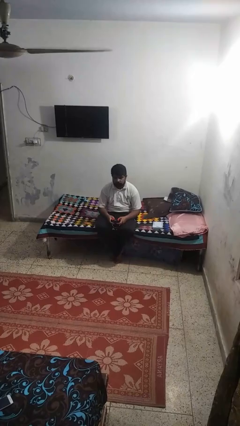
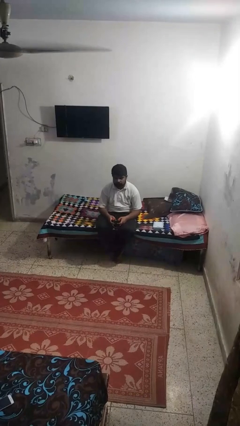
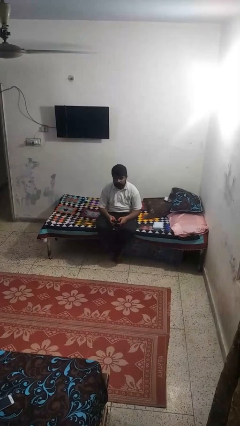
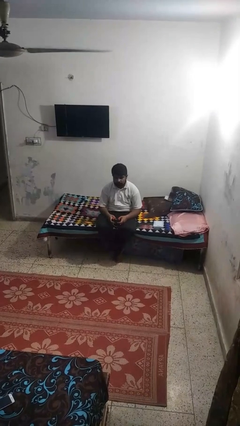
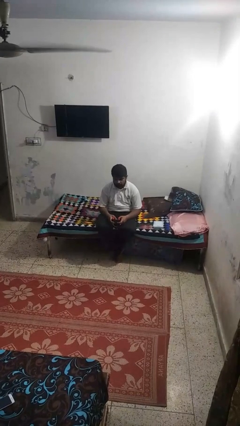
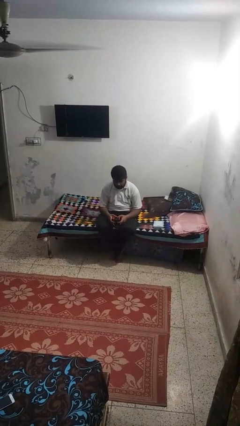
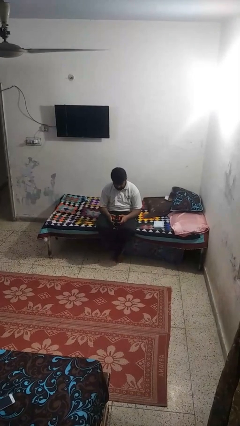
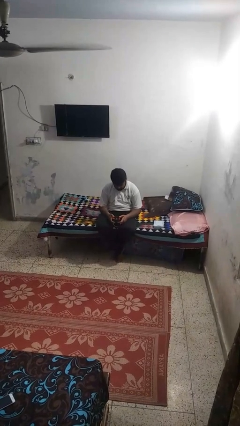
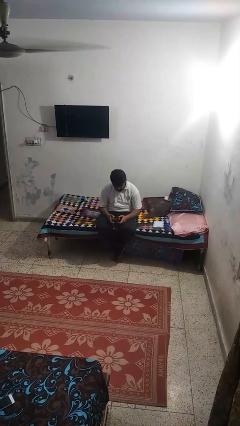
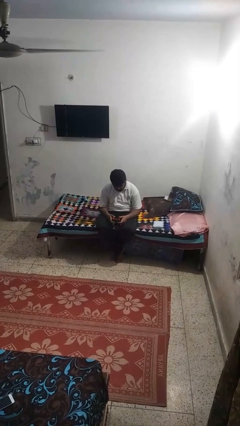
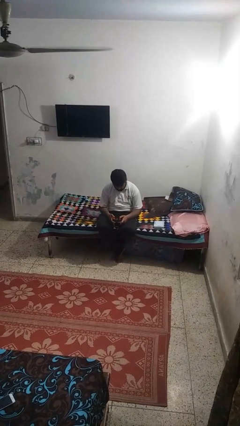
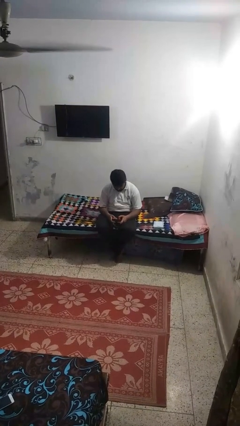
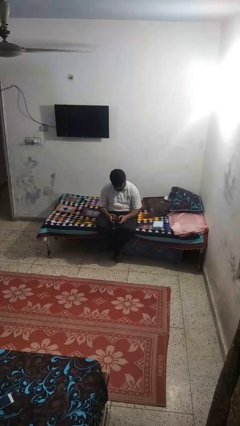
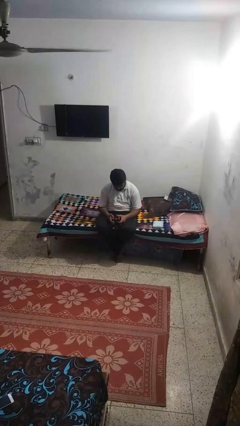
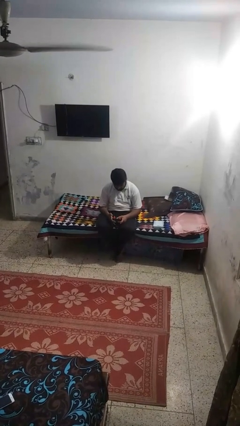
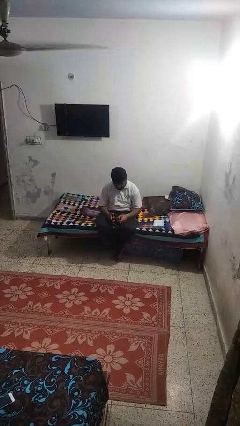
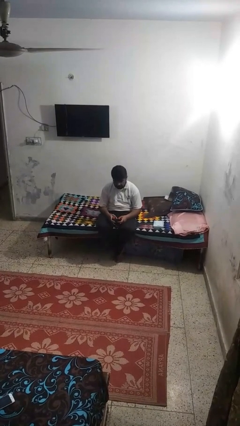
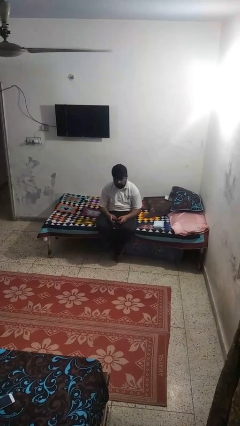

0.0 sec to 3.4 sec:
person interacts with handheld game

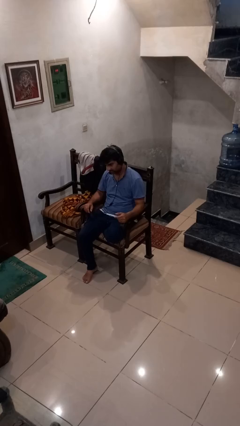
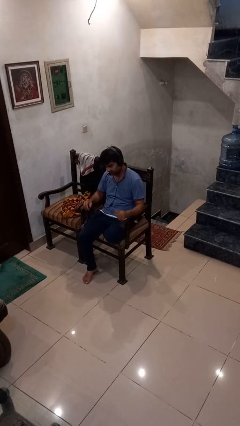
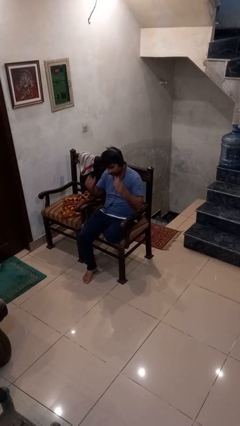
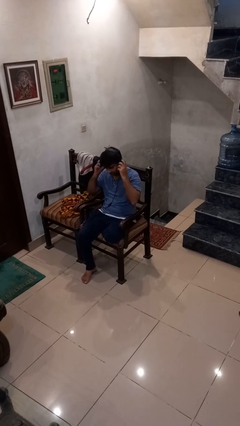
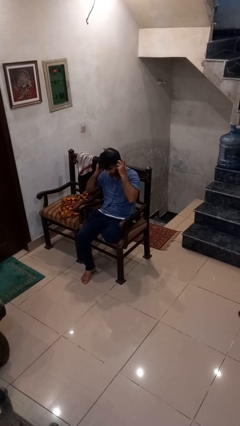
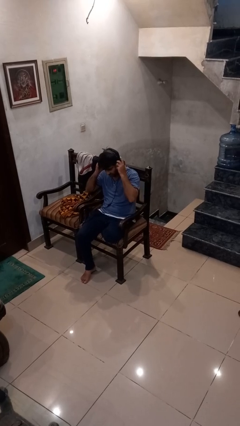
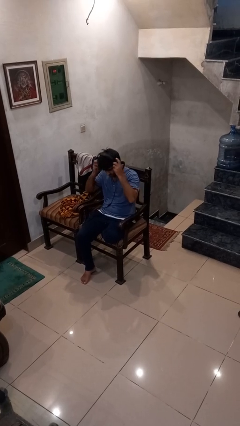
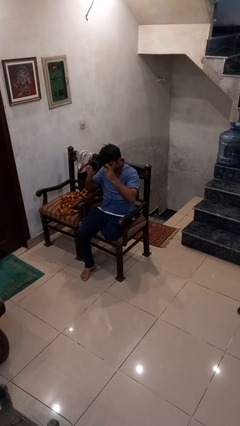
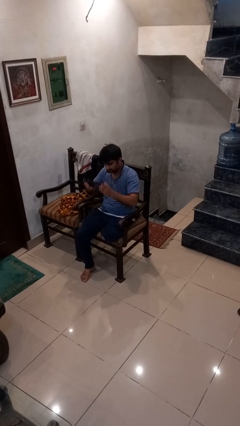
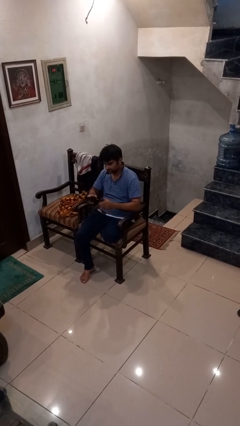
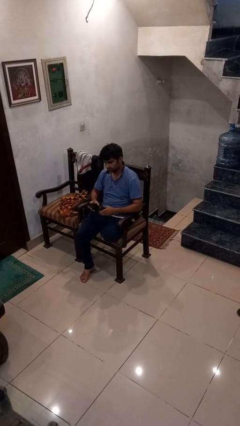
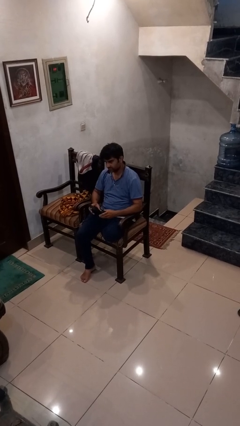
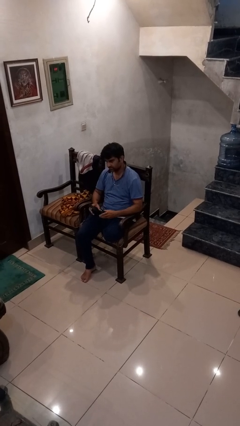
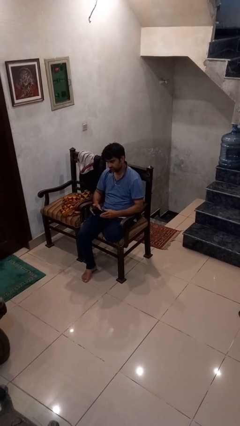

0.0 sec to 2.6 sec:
person takes off headphones

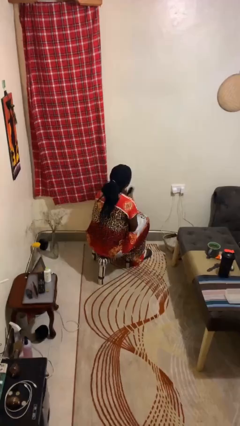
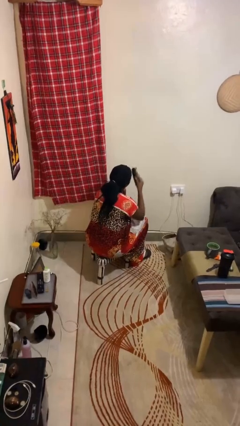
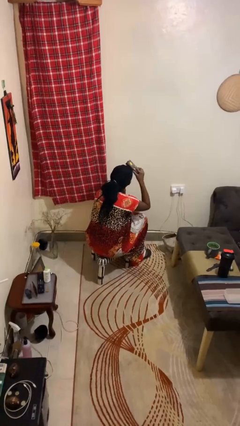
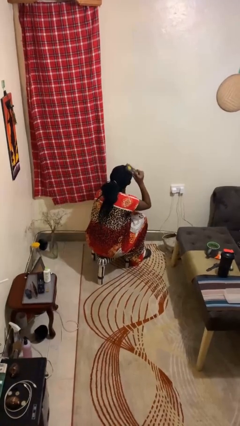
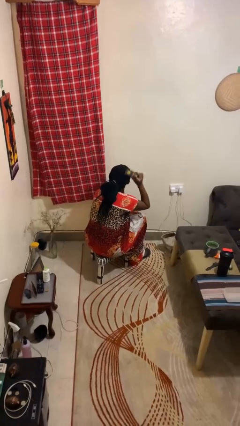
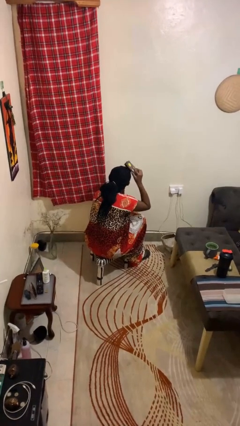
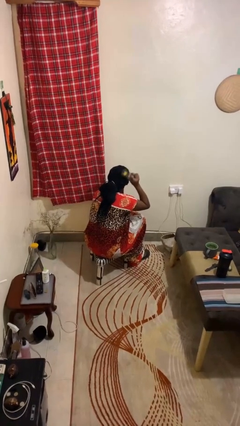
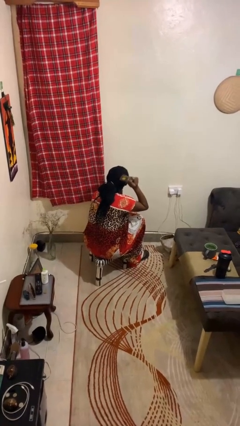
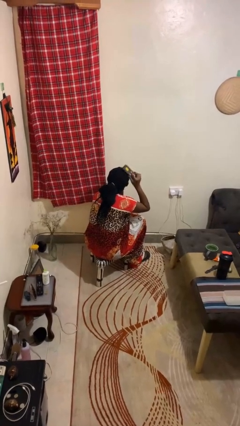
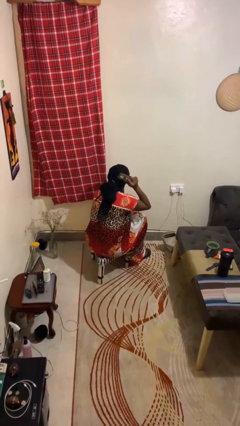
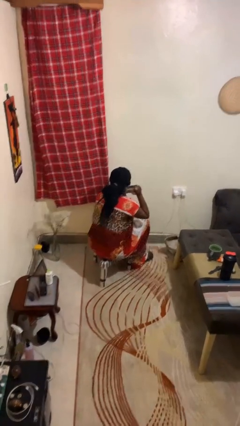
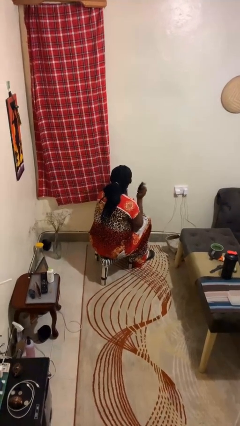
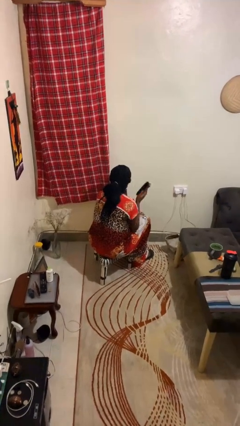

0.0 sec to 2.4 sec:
person brushes hair

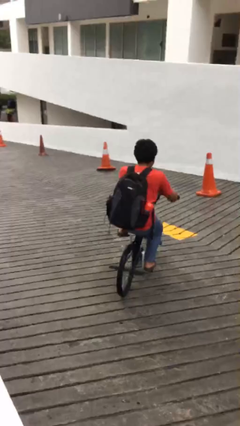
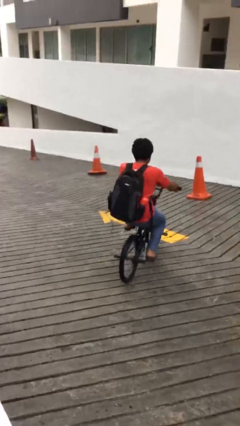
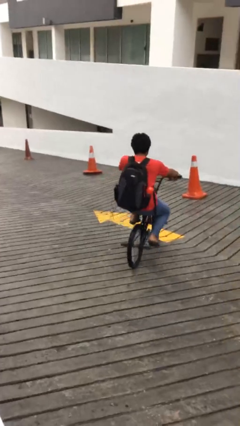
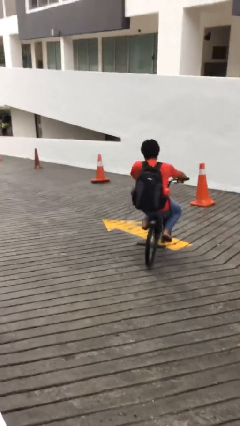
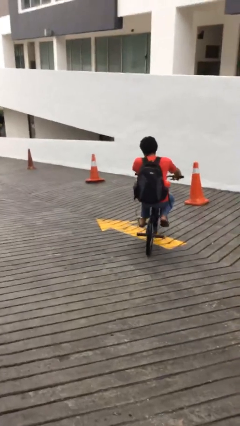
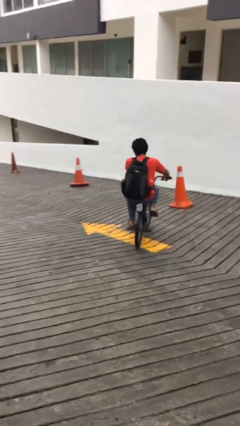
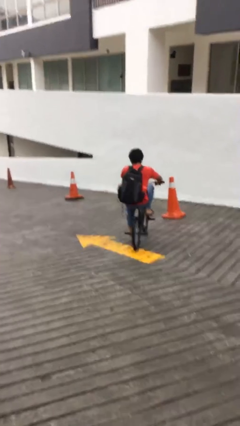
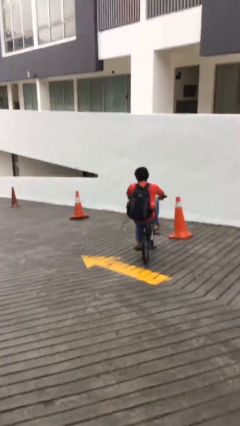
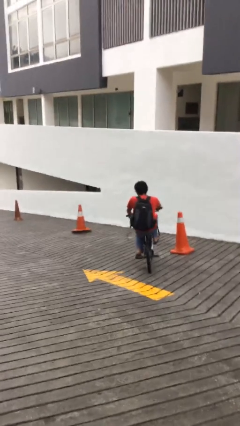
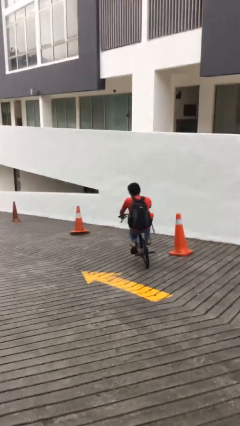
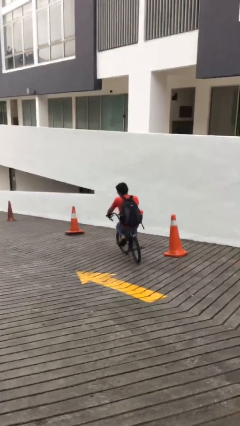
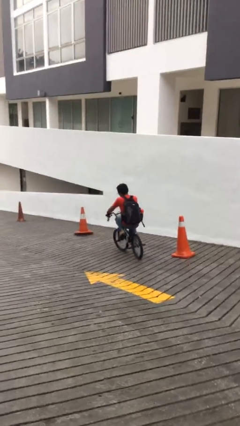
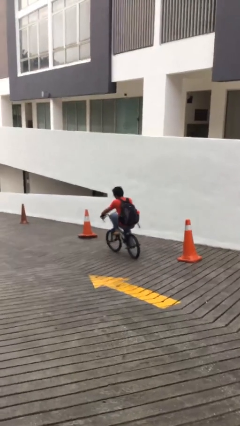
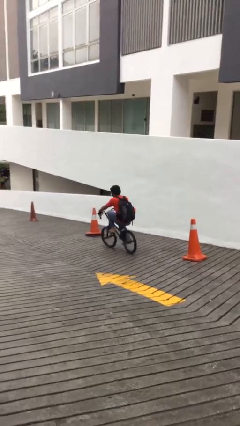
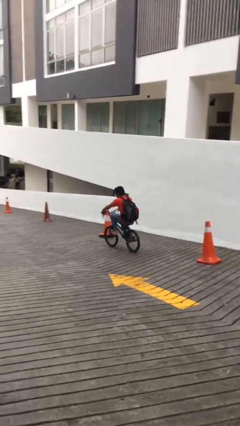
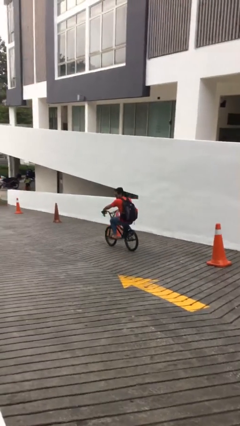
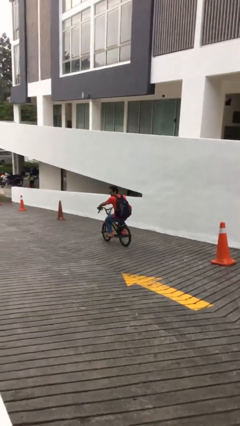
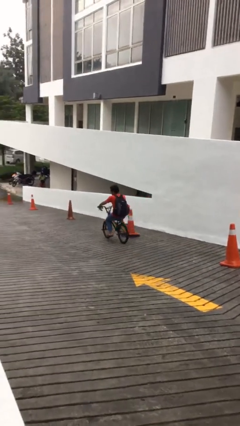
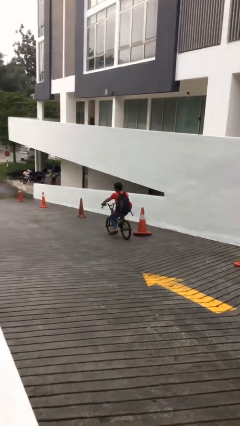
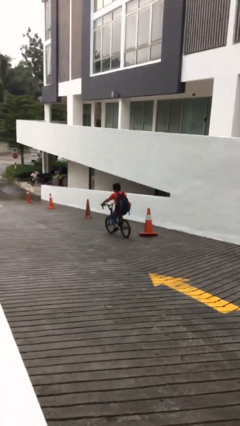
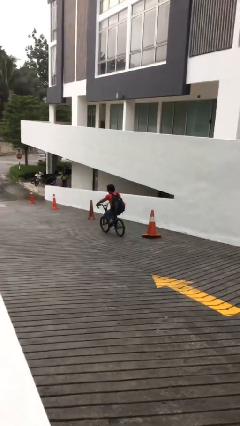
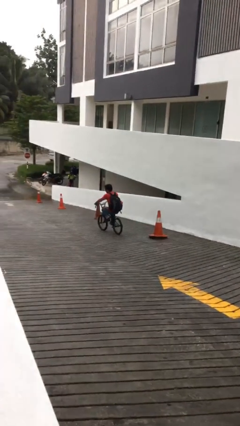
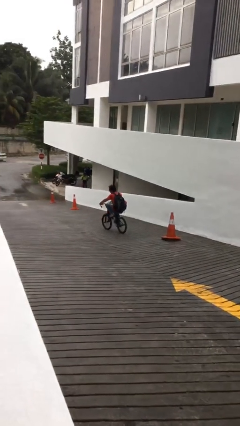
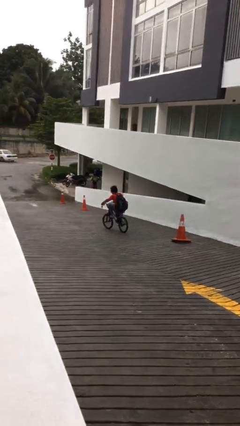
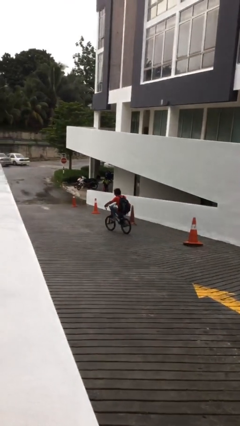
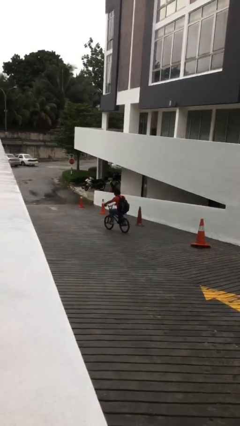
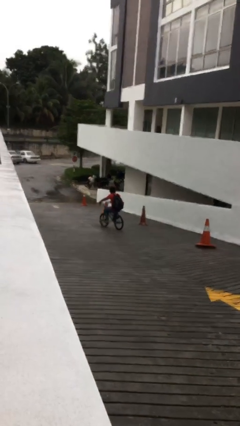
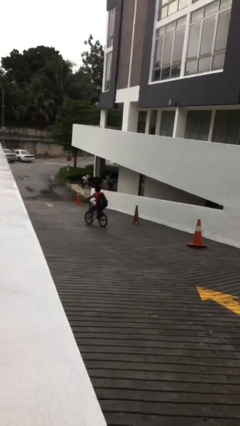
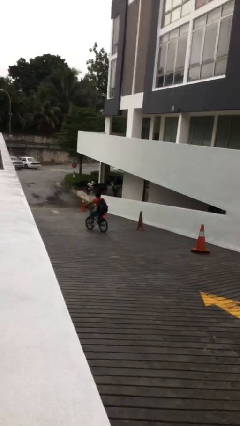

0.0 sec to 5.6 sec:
person rides bicycle

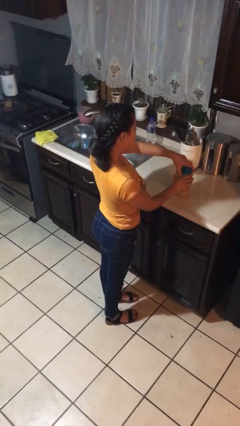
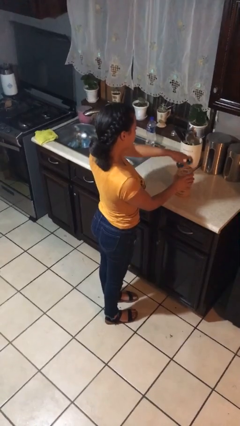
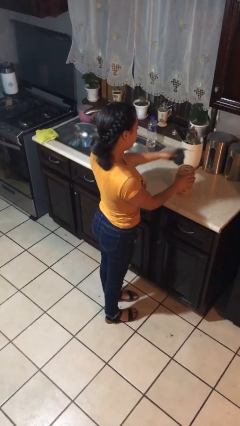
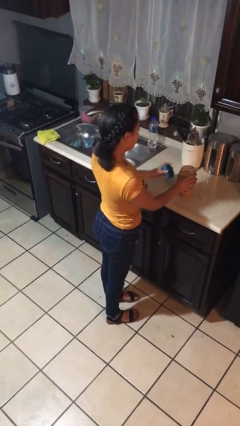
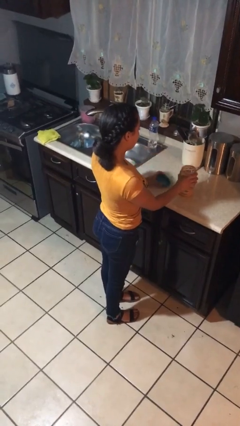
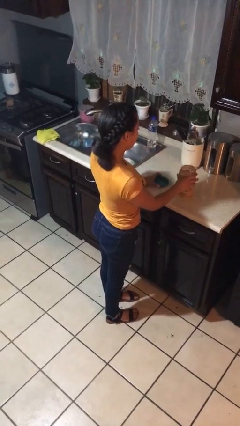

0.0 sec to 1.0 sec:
person opens jar

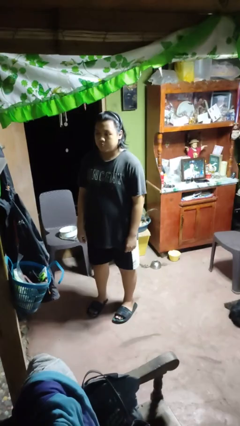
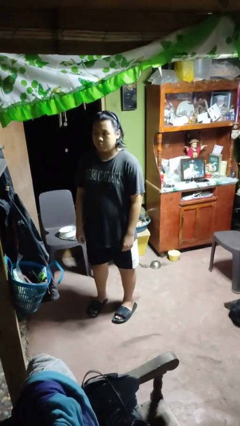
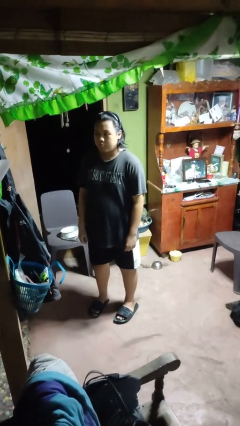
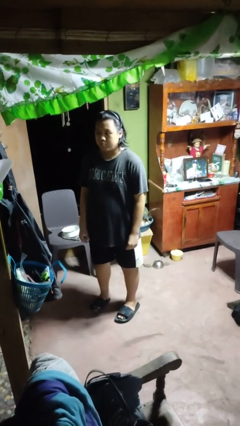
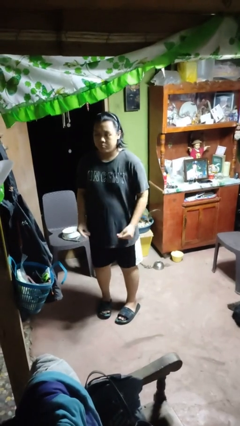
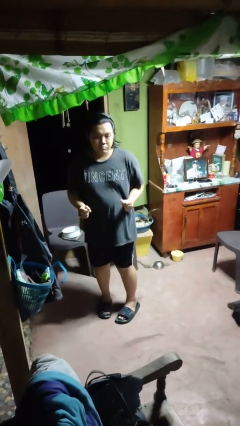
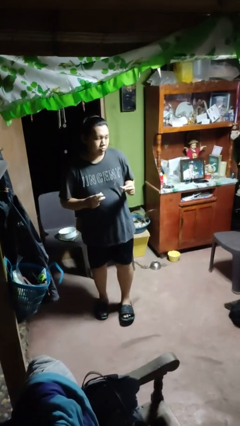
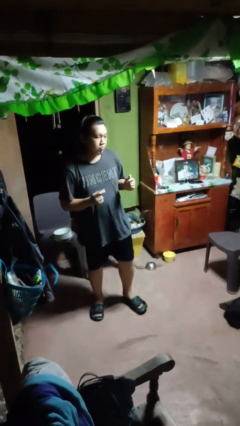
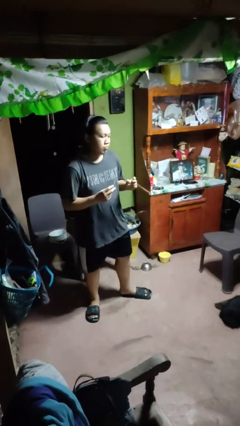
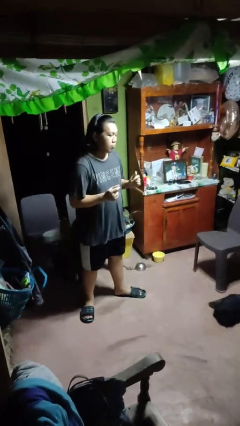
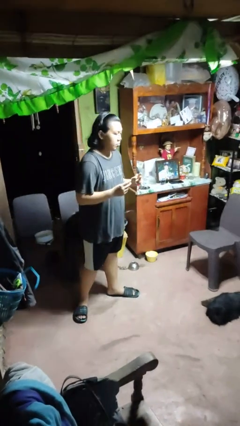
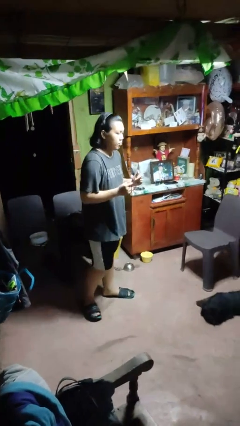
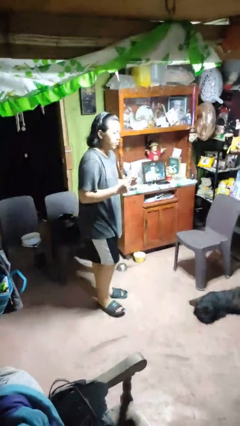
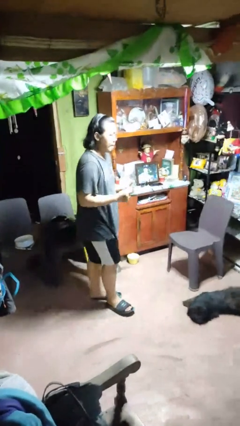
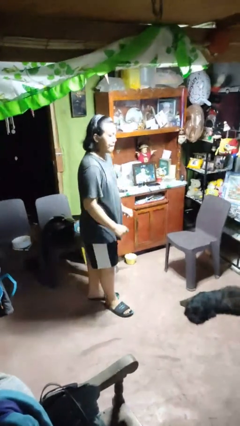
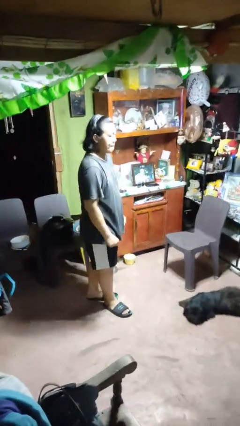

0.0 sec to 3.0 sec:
person snaps fingers
